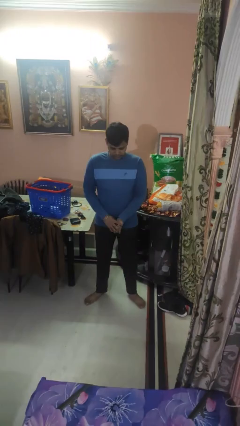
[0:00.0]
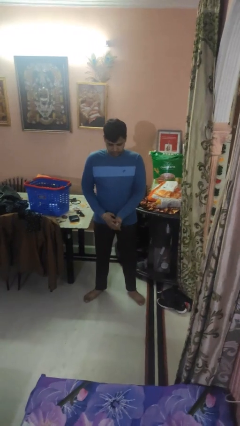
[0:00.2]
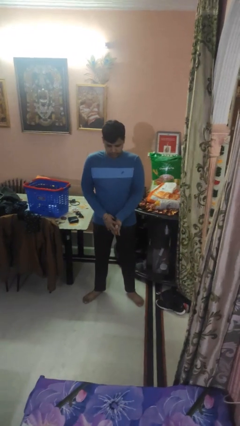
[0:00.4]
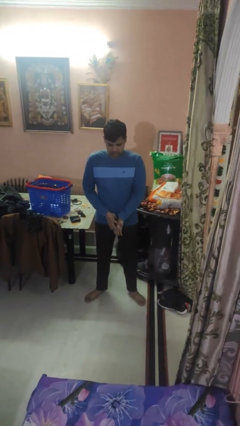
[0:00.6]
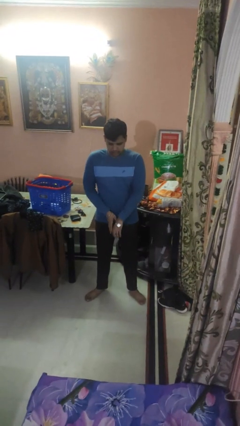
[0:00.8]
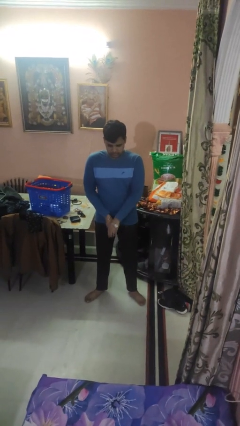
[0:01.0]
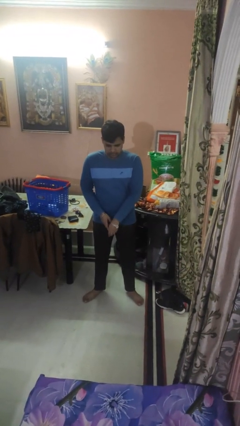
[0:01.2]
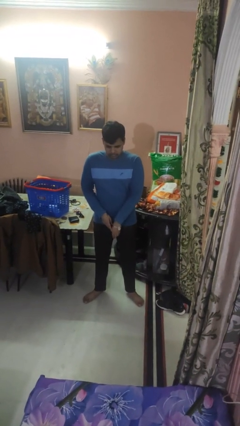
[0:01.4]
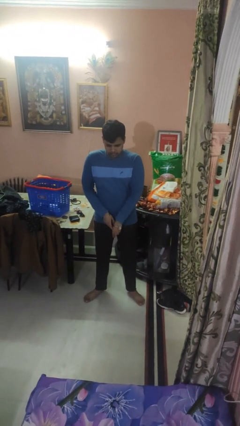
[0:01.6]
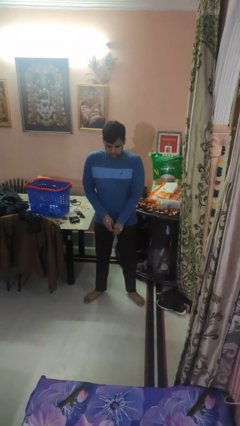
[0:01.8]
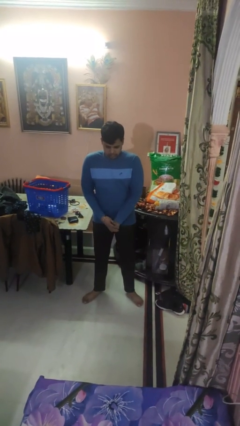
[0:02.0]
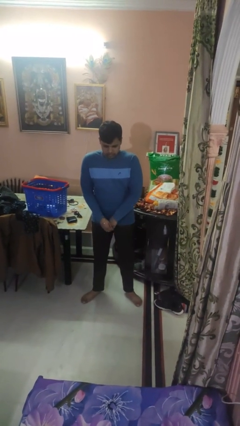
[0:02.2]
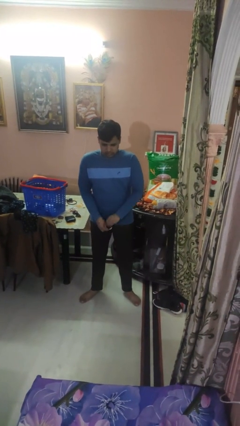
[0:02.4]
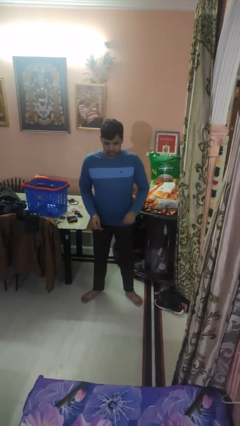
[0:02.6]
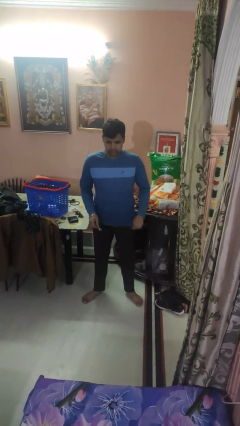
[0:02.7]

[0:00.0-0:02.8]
person takes off wristwatch

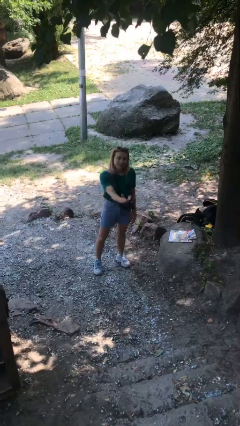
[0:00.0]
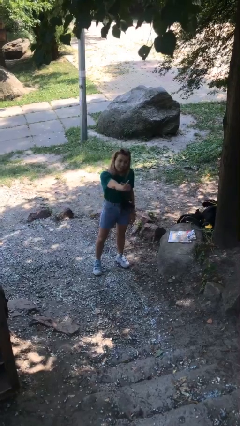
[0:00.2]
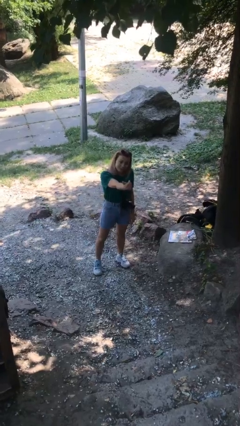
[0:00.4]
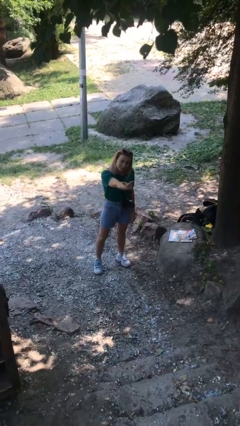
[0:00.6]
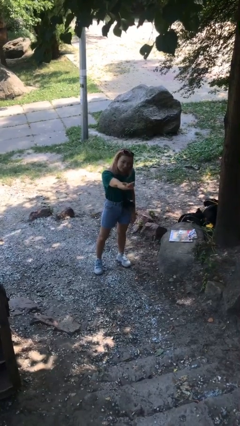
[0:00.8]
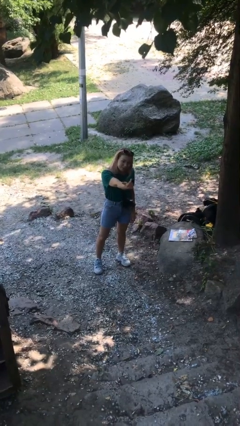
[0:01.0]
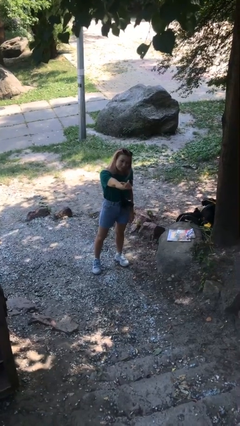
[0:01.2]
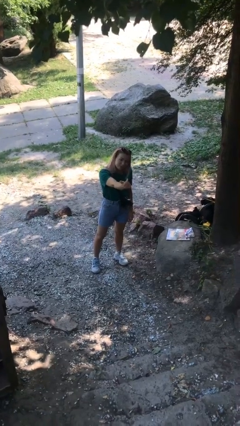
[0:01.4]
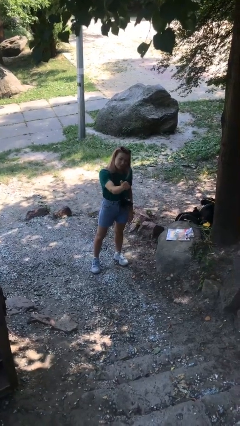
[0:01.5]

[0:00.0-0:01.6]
person gestures come here

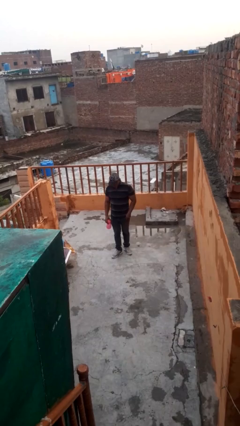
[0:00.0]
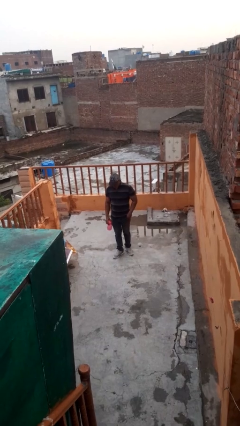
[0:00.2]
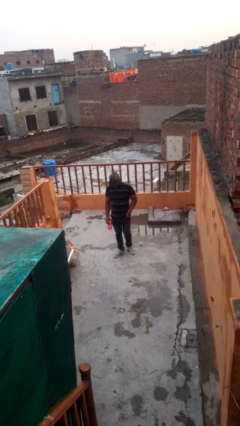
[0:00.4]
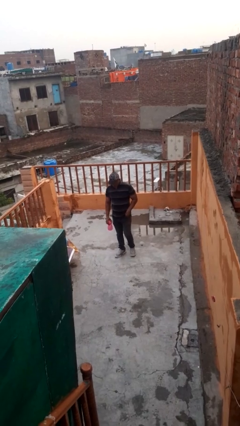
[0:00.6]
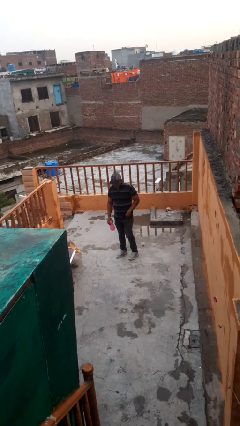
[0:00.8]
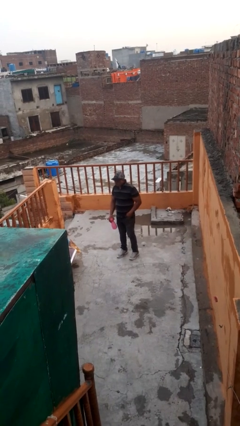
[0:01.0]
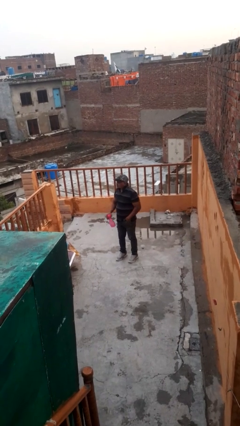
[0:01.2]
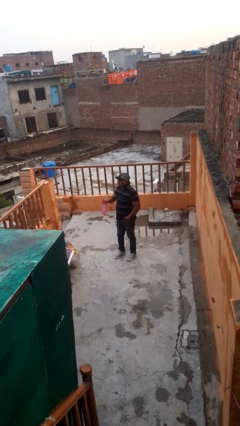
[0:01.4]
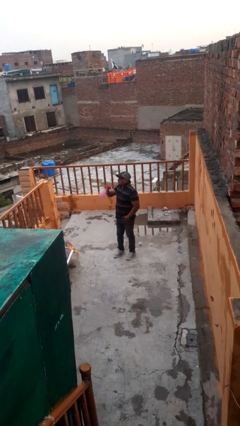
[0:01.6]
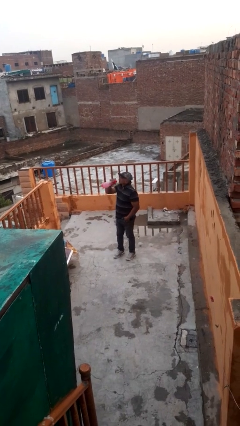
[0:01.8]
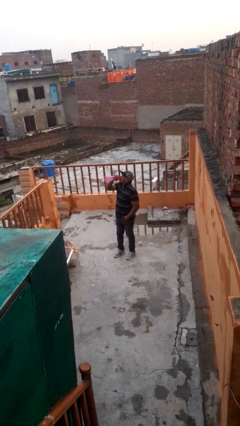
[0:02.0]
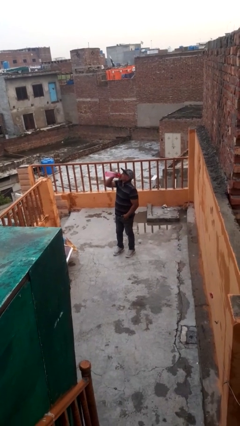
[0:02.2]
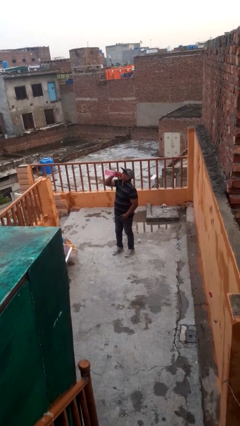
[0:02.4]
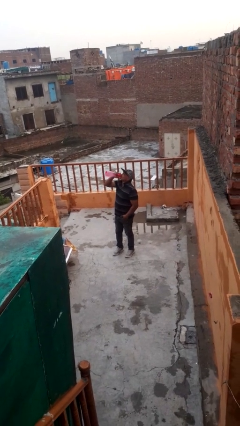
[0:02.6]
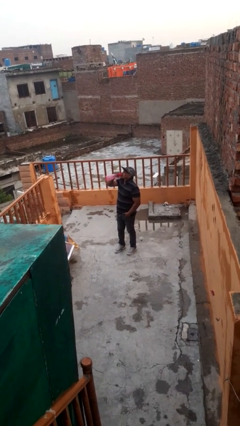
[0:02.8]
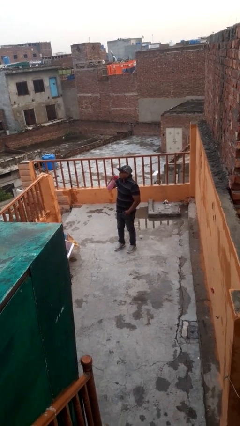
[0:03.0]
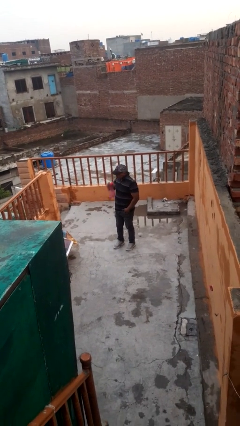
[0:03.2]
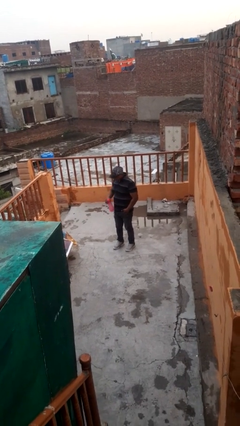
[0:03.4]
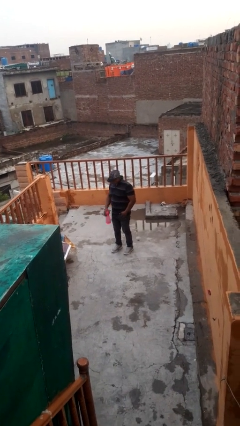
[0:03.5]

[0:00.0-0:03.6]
person drinks from bottle

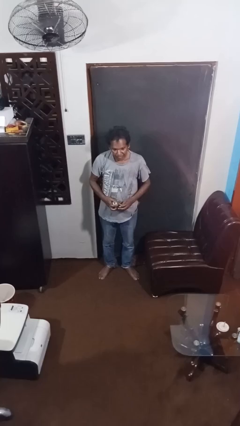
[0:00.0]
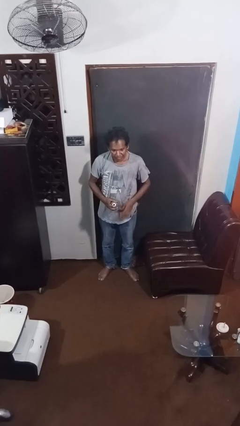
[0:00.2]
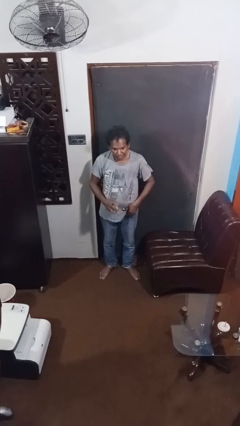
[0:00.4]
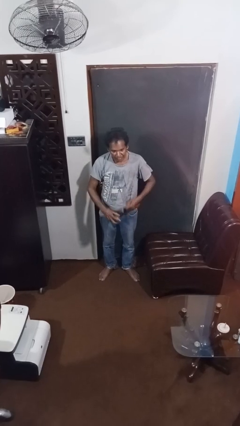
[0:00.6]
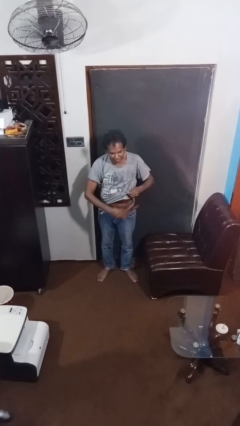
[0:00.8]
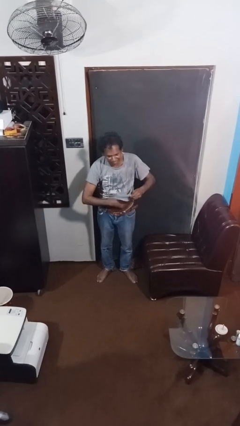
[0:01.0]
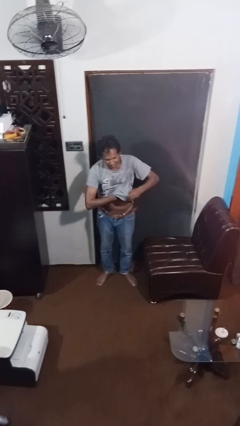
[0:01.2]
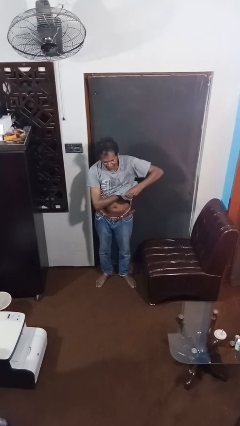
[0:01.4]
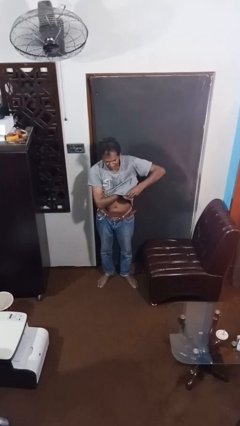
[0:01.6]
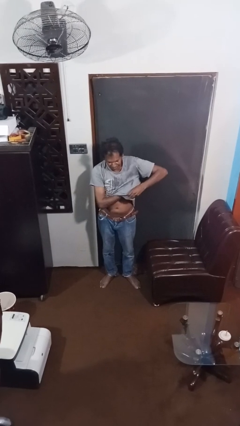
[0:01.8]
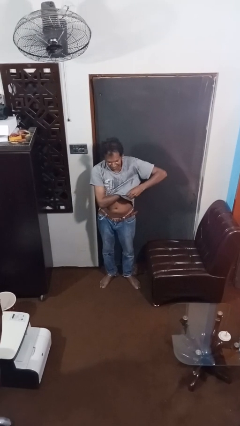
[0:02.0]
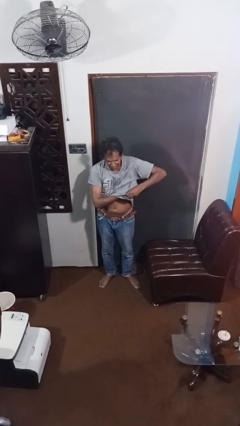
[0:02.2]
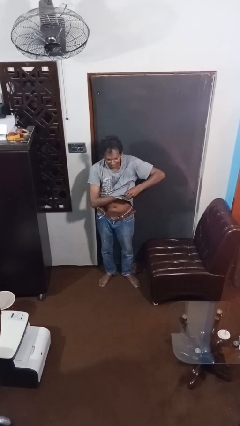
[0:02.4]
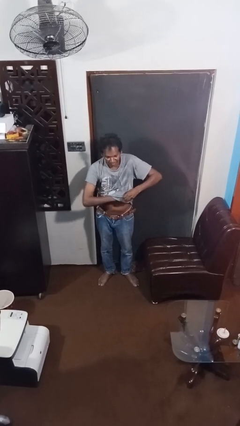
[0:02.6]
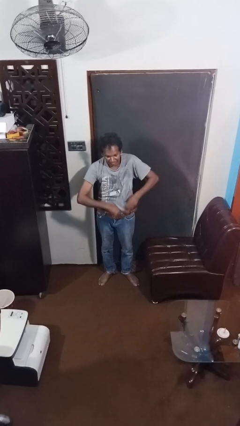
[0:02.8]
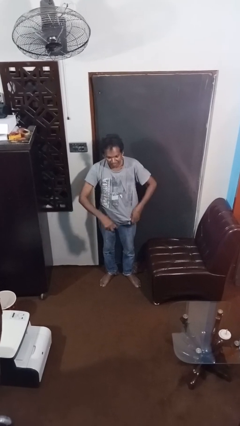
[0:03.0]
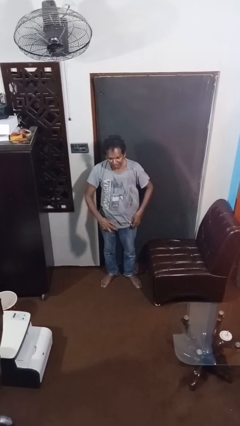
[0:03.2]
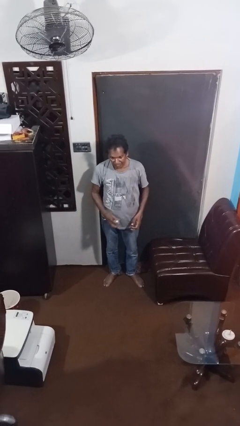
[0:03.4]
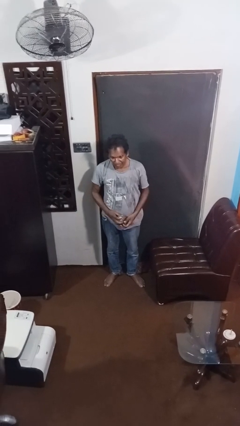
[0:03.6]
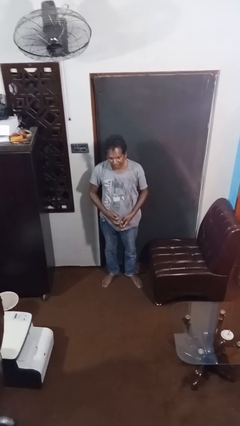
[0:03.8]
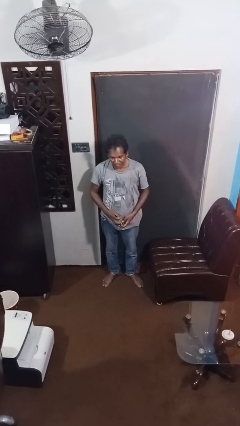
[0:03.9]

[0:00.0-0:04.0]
person applies deodorant

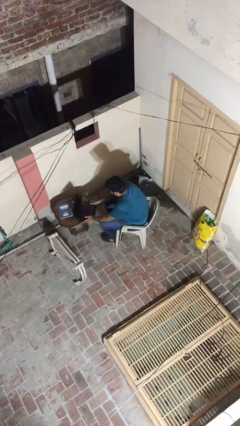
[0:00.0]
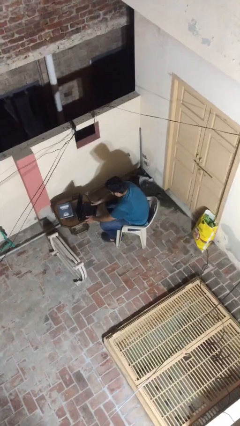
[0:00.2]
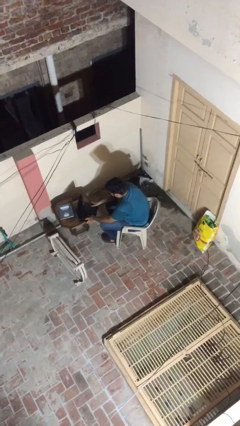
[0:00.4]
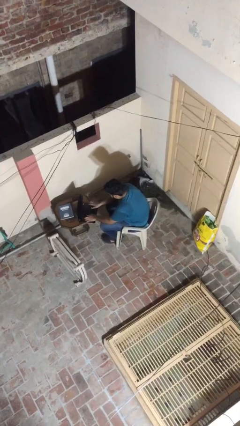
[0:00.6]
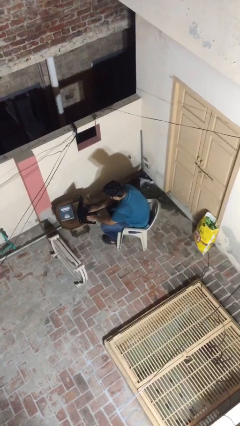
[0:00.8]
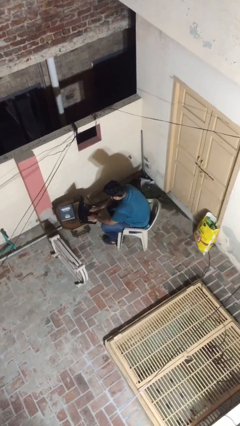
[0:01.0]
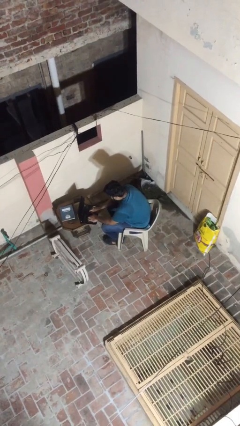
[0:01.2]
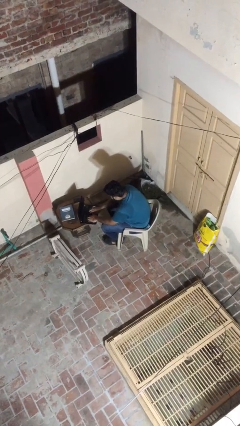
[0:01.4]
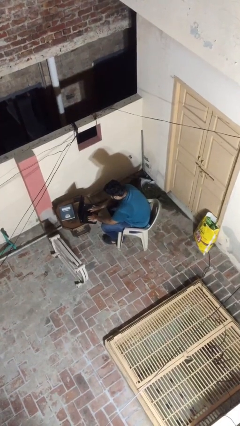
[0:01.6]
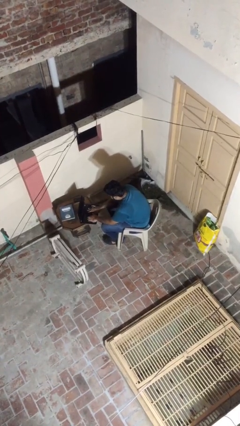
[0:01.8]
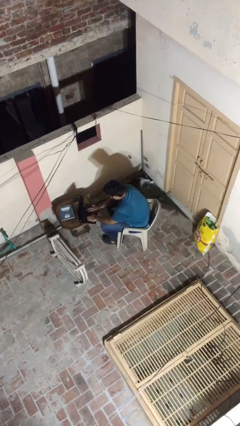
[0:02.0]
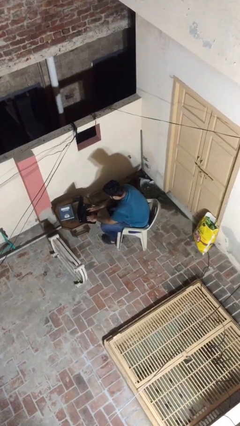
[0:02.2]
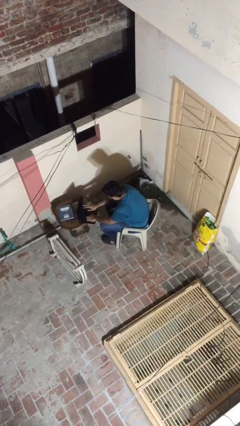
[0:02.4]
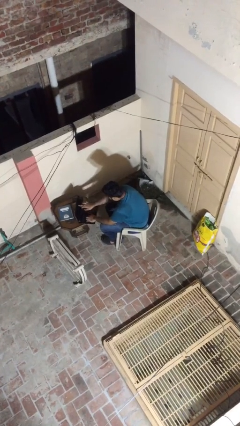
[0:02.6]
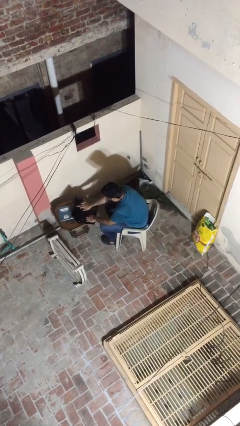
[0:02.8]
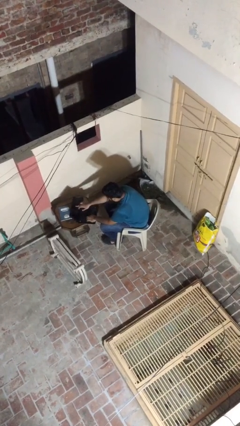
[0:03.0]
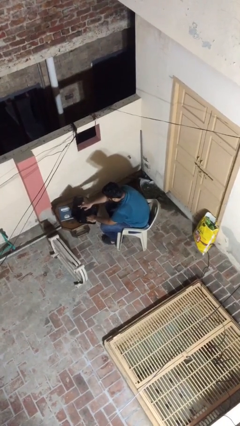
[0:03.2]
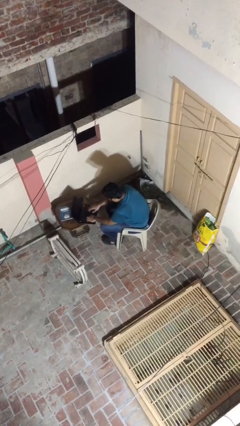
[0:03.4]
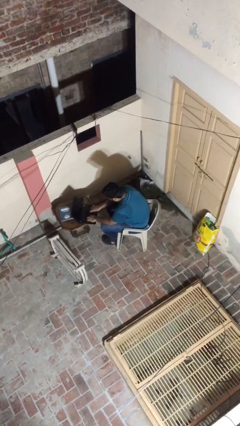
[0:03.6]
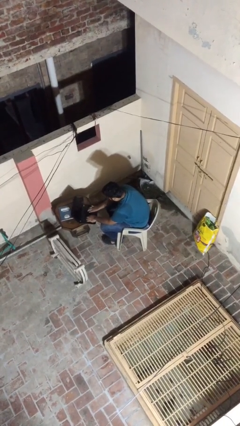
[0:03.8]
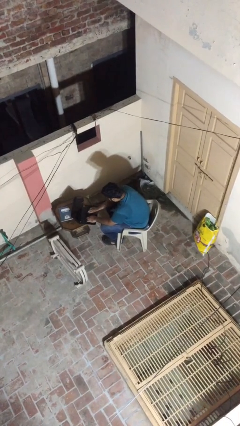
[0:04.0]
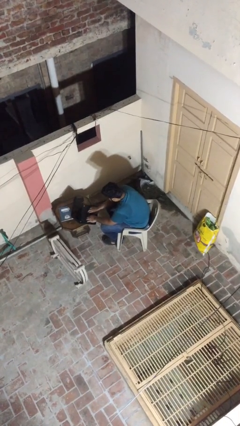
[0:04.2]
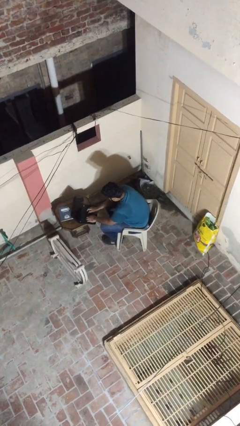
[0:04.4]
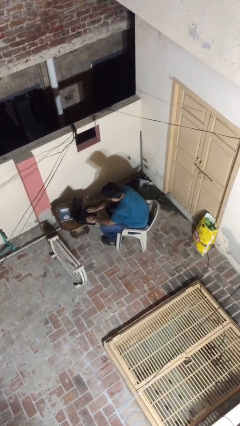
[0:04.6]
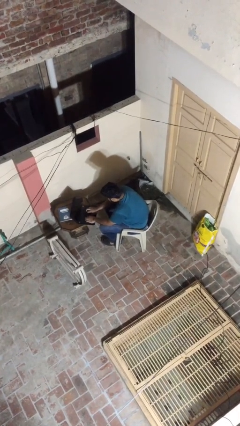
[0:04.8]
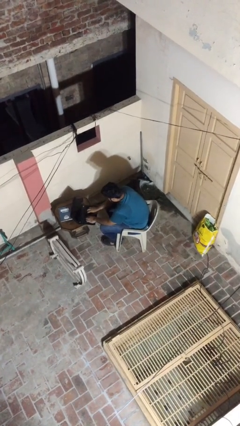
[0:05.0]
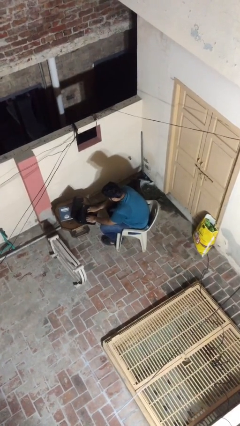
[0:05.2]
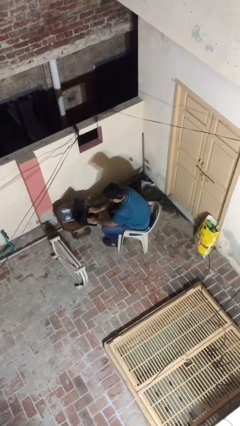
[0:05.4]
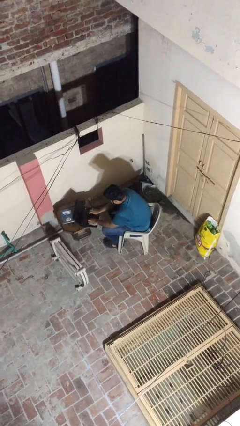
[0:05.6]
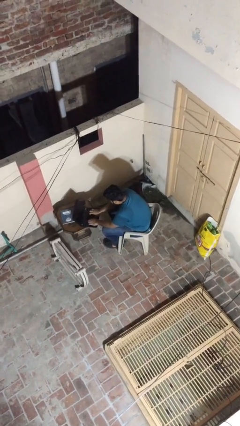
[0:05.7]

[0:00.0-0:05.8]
person interacts with laptop
